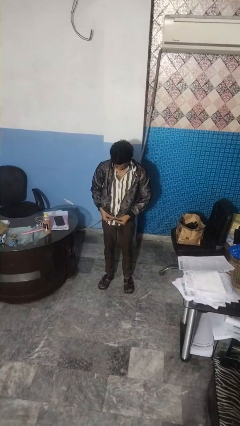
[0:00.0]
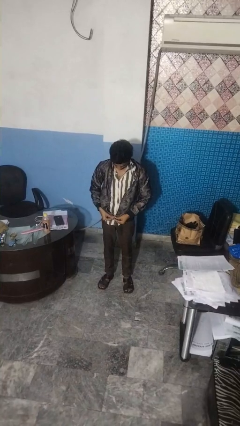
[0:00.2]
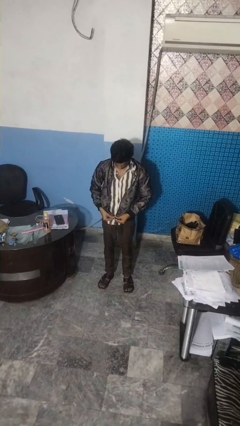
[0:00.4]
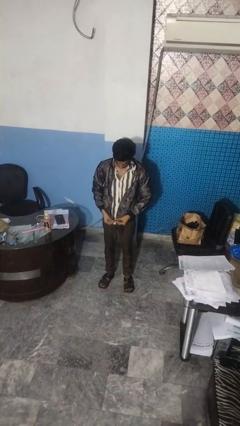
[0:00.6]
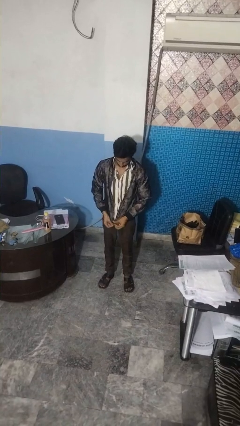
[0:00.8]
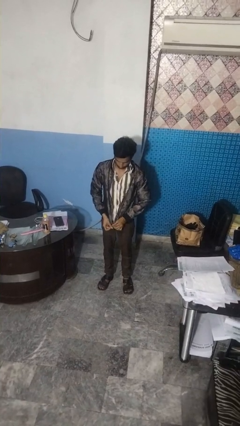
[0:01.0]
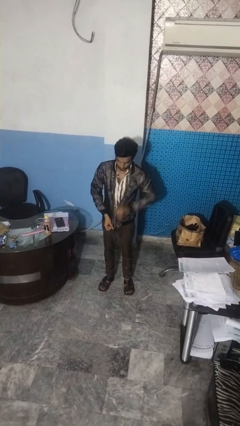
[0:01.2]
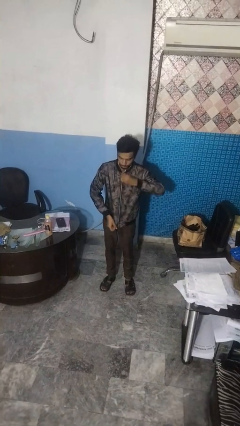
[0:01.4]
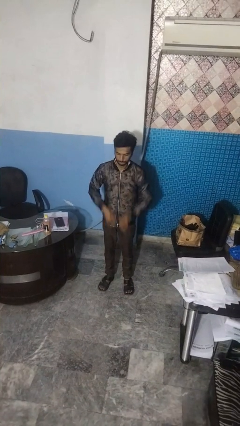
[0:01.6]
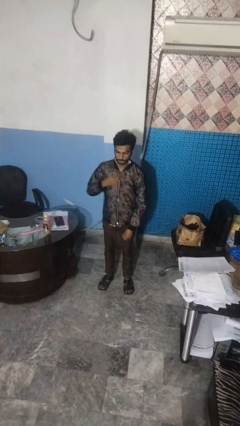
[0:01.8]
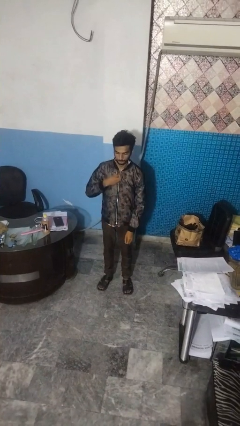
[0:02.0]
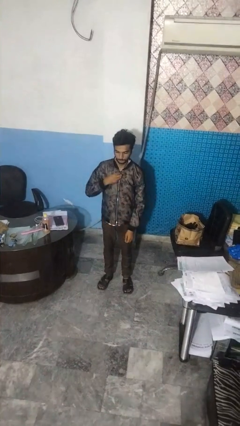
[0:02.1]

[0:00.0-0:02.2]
person zips up jacket

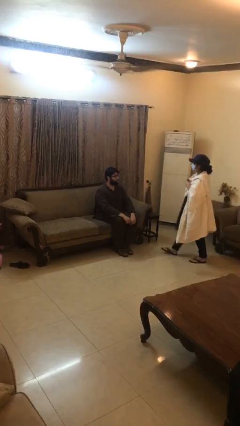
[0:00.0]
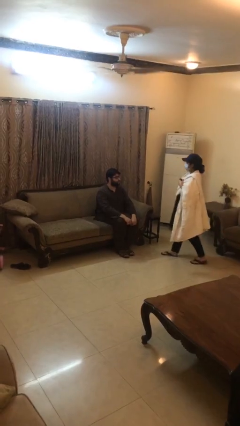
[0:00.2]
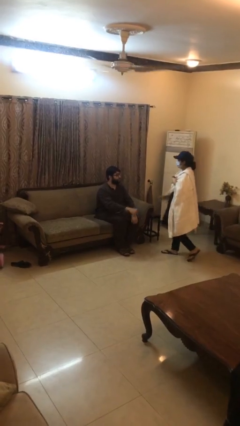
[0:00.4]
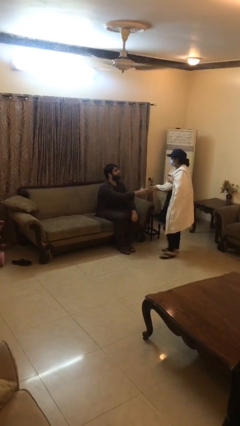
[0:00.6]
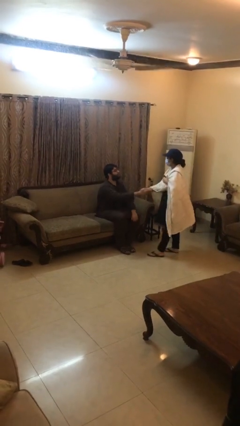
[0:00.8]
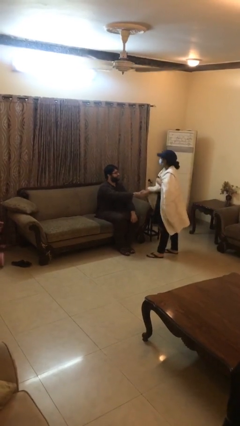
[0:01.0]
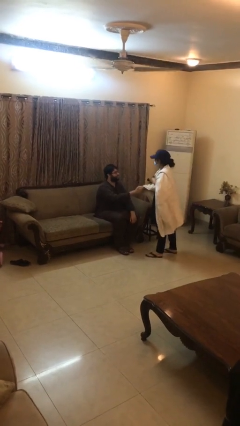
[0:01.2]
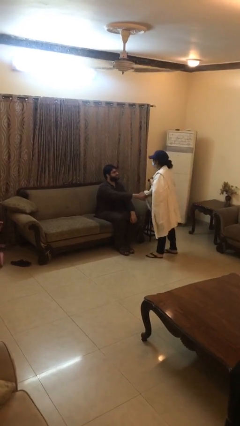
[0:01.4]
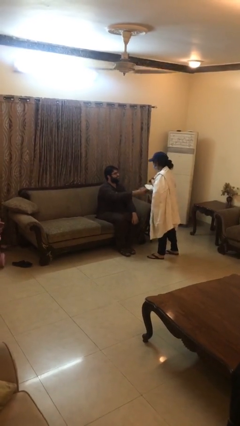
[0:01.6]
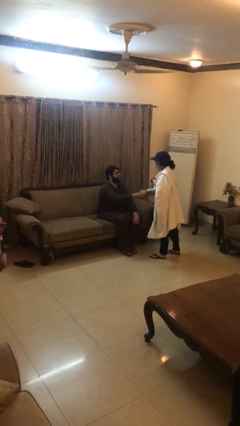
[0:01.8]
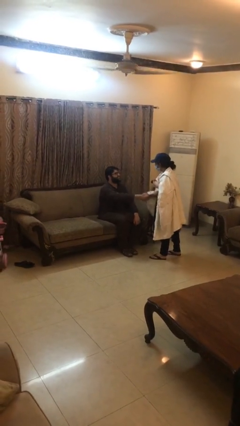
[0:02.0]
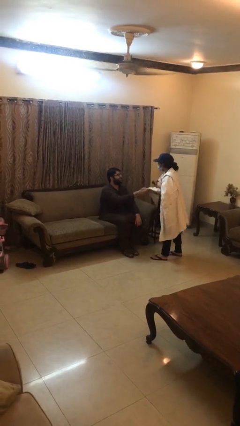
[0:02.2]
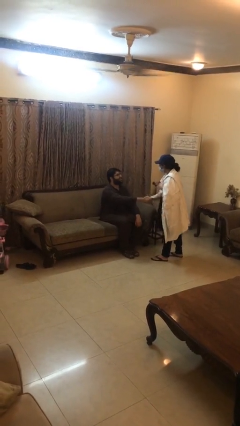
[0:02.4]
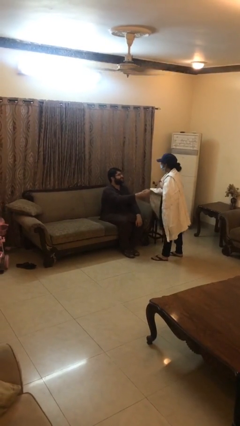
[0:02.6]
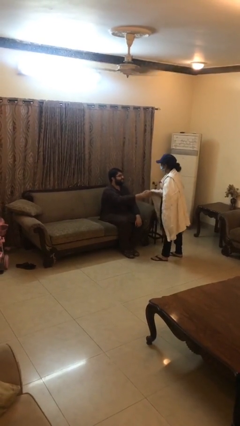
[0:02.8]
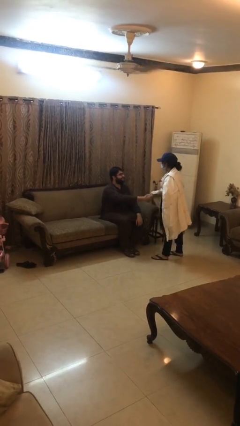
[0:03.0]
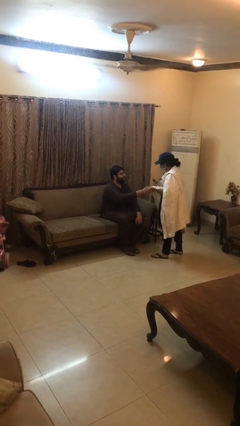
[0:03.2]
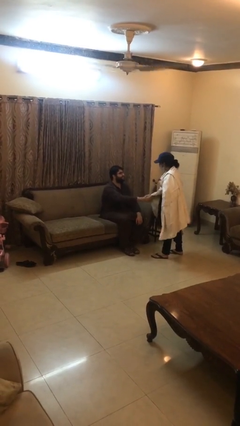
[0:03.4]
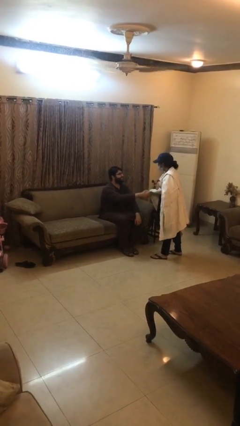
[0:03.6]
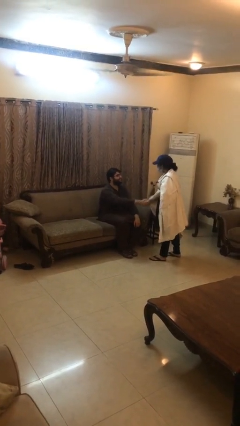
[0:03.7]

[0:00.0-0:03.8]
person shakes hand

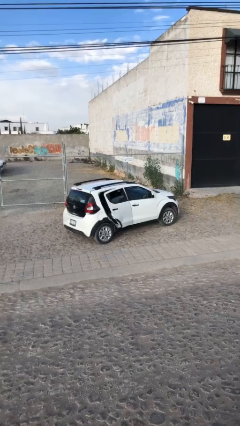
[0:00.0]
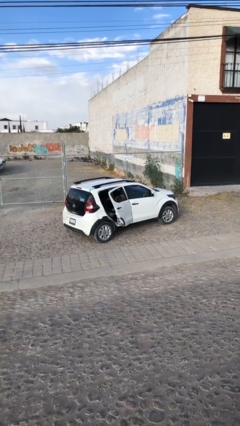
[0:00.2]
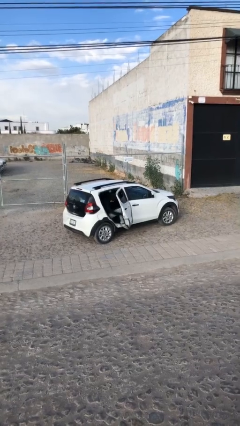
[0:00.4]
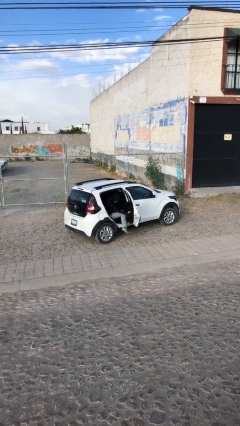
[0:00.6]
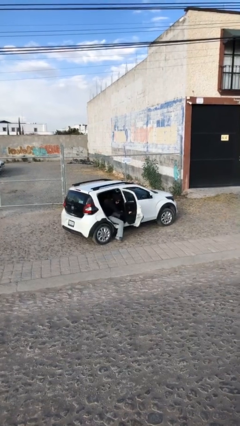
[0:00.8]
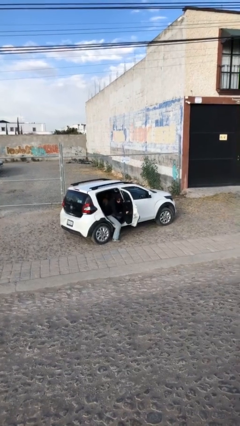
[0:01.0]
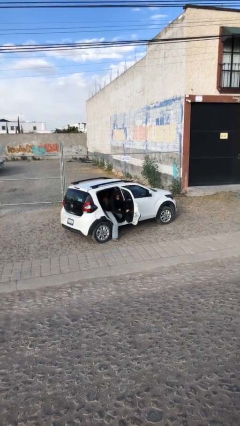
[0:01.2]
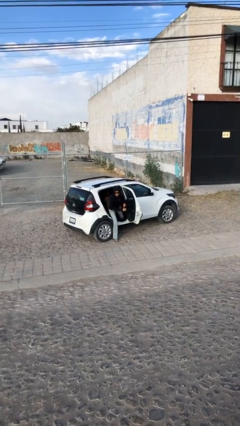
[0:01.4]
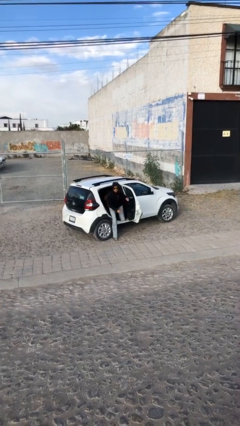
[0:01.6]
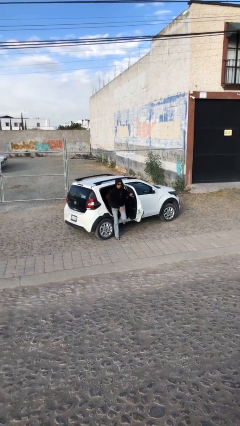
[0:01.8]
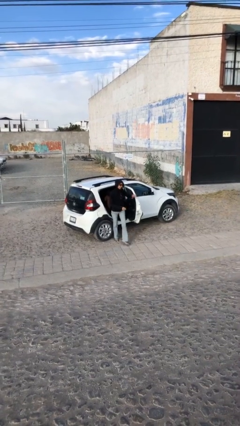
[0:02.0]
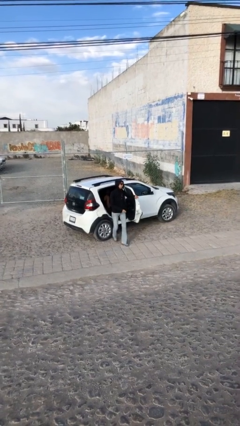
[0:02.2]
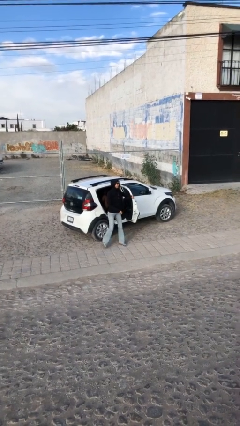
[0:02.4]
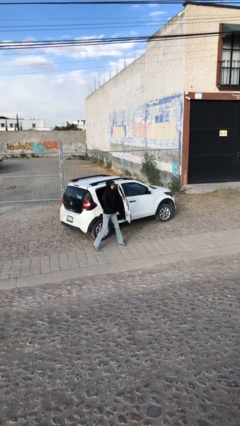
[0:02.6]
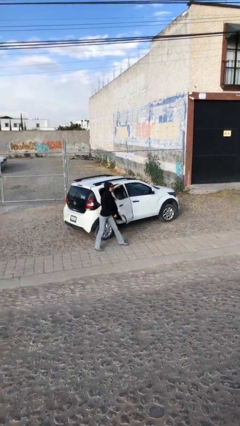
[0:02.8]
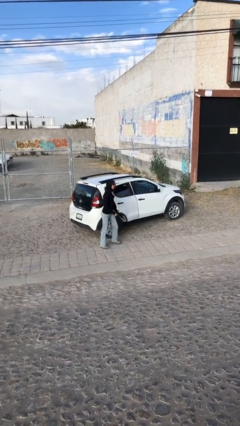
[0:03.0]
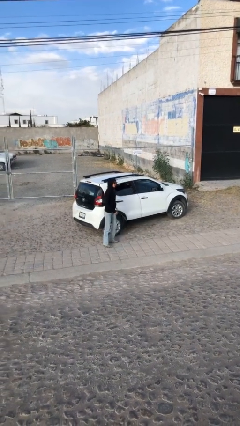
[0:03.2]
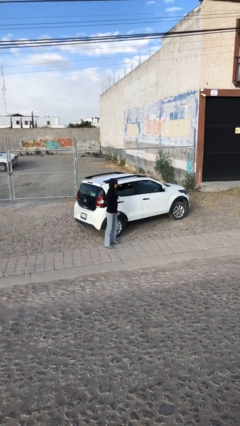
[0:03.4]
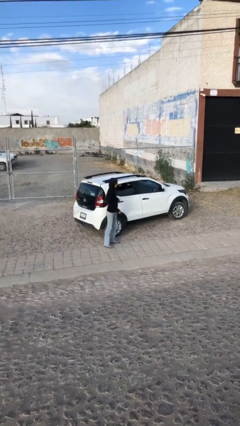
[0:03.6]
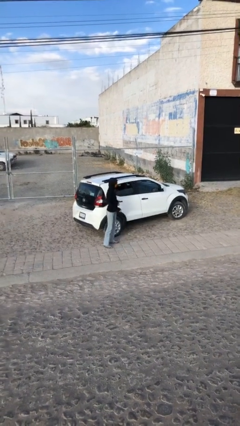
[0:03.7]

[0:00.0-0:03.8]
car drops off person

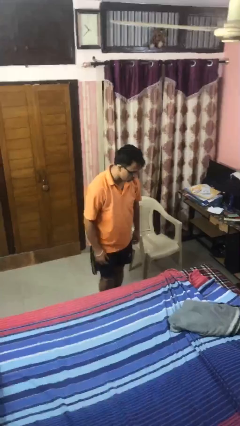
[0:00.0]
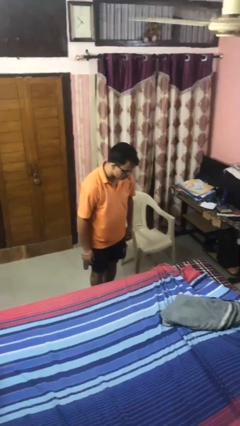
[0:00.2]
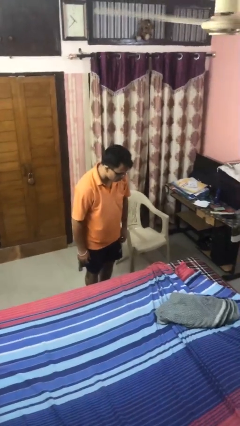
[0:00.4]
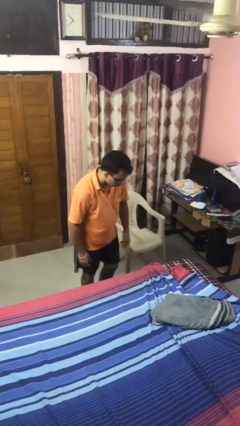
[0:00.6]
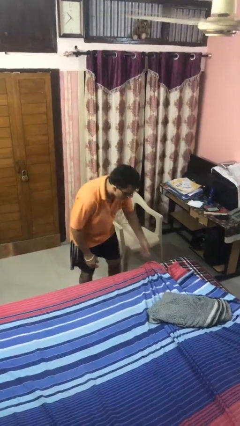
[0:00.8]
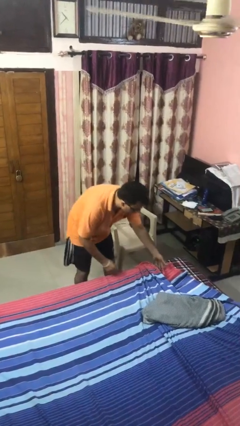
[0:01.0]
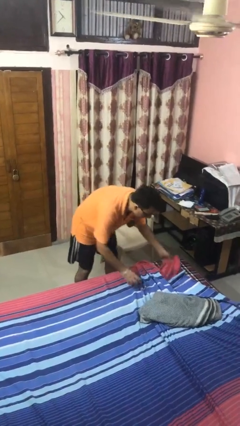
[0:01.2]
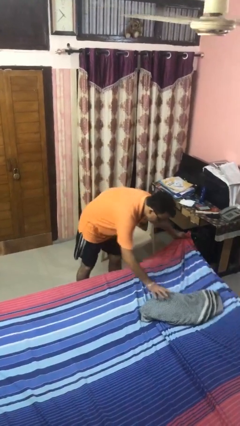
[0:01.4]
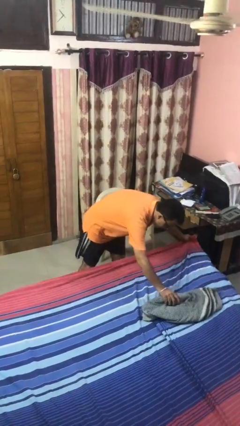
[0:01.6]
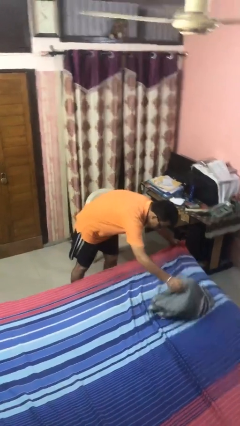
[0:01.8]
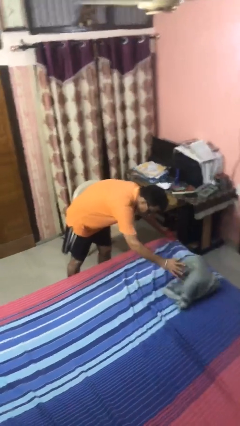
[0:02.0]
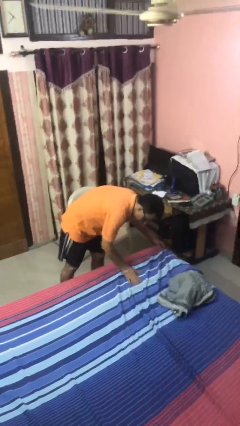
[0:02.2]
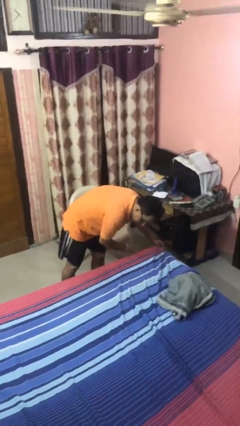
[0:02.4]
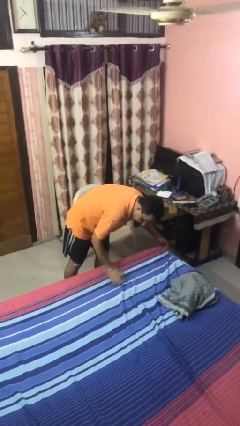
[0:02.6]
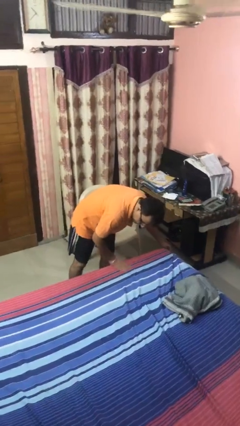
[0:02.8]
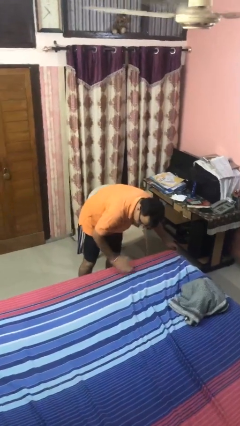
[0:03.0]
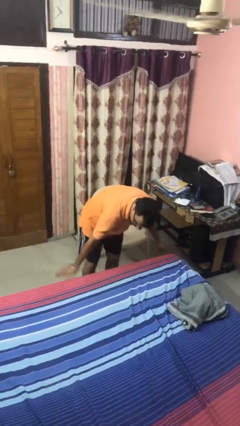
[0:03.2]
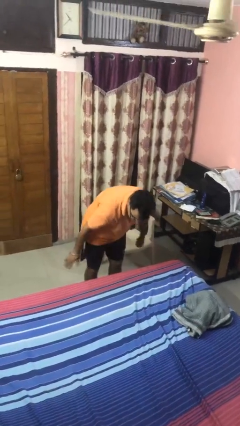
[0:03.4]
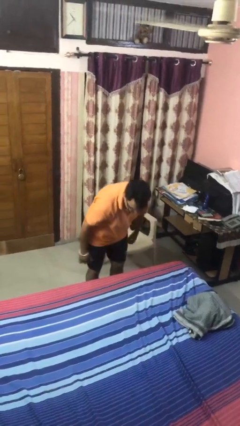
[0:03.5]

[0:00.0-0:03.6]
person makes bed

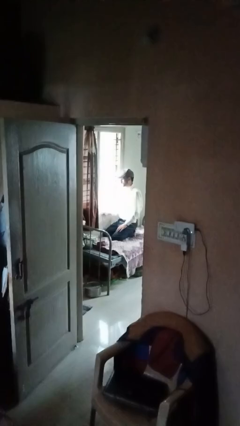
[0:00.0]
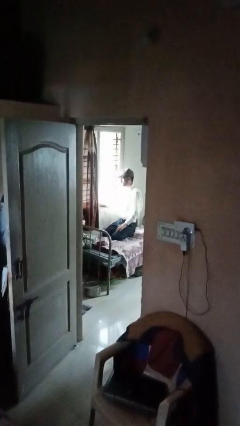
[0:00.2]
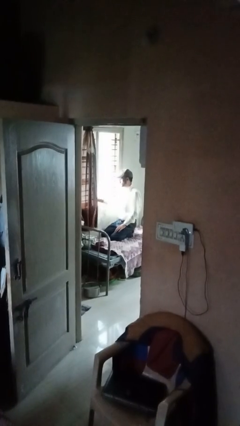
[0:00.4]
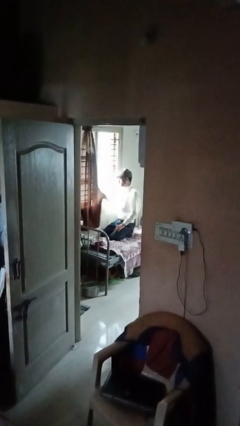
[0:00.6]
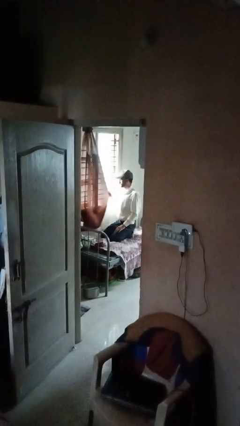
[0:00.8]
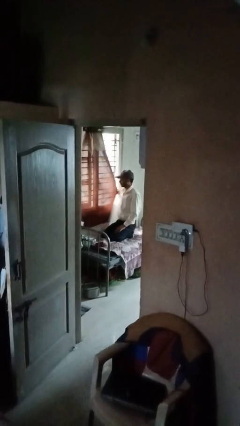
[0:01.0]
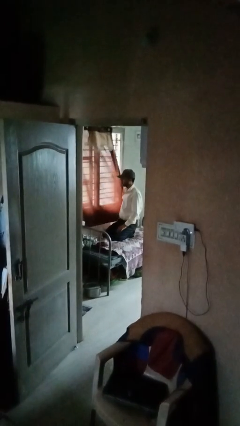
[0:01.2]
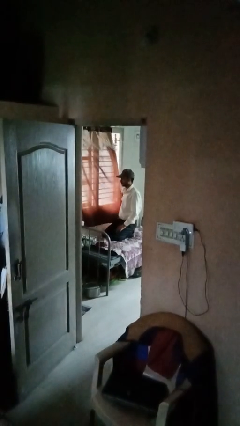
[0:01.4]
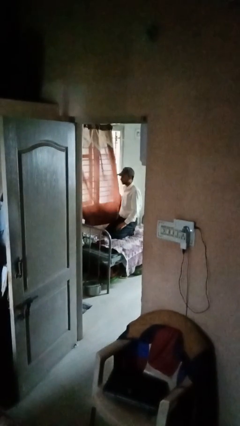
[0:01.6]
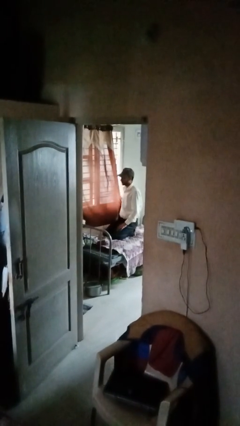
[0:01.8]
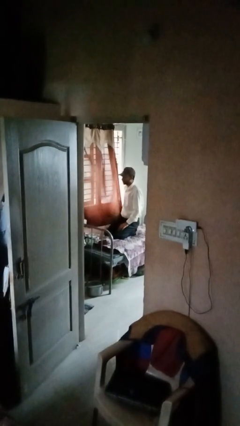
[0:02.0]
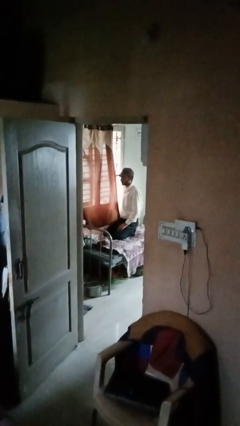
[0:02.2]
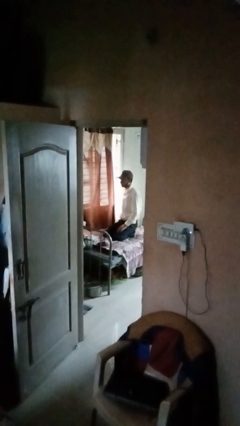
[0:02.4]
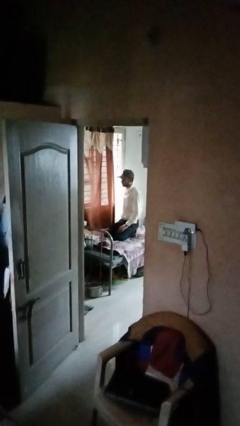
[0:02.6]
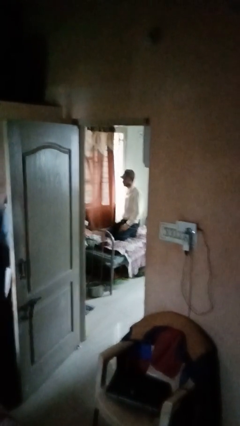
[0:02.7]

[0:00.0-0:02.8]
person closes curtains

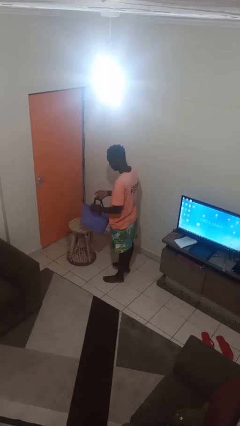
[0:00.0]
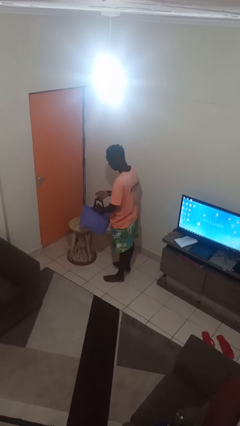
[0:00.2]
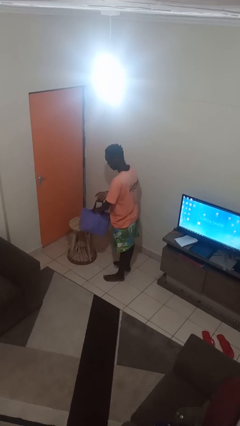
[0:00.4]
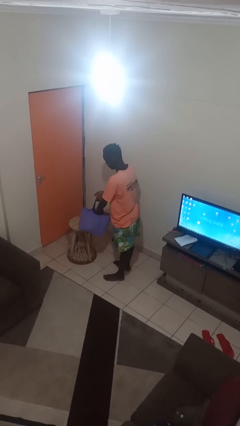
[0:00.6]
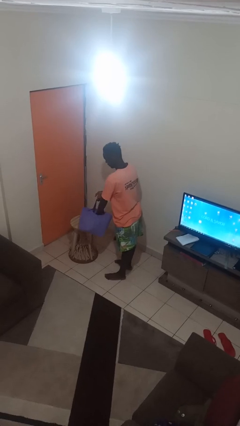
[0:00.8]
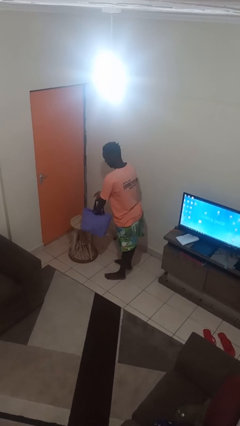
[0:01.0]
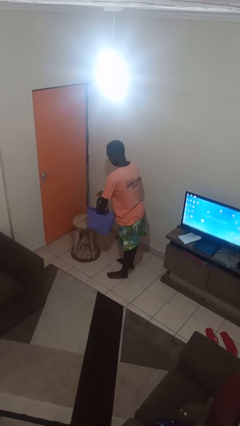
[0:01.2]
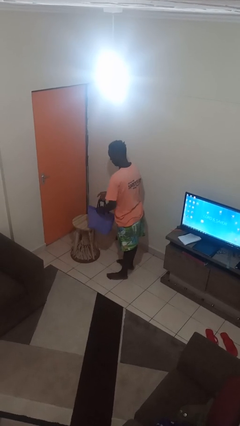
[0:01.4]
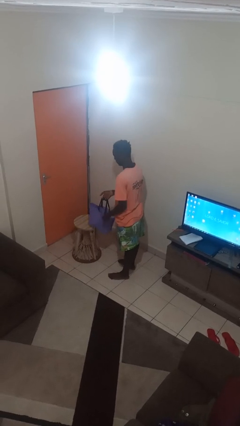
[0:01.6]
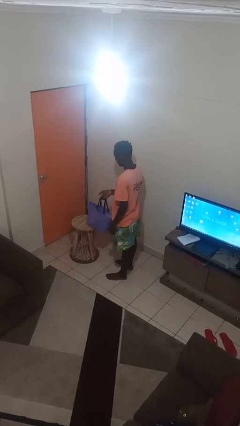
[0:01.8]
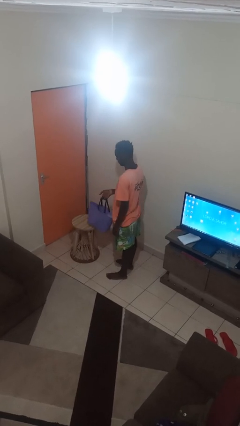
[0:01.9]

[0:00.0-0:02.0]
person puts object into bag
